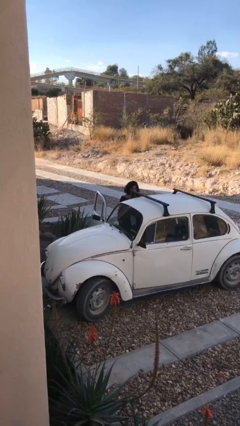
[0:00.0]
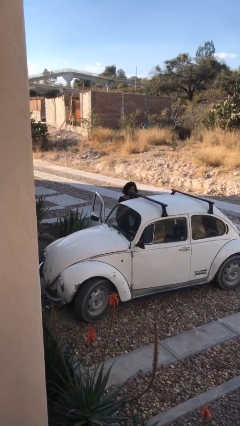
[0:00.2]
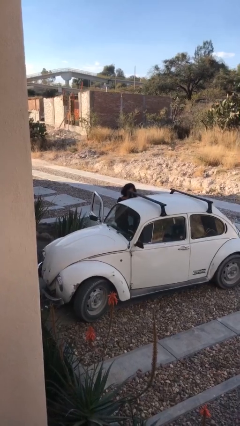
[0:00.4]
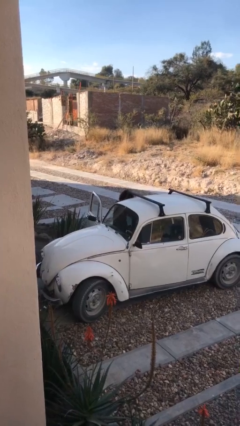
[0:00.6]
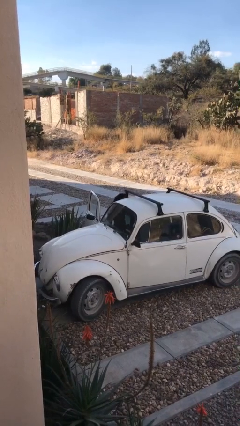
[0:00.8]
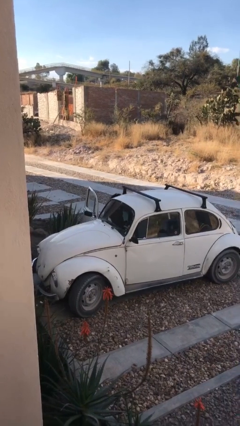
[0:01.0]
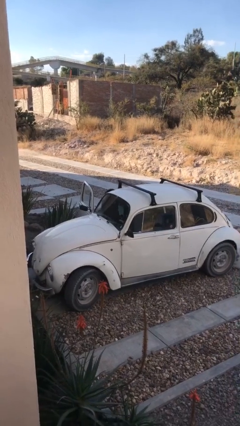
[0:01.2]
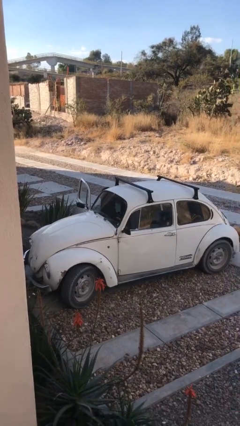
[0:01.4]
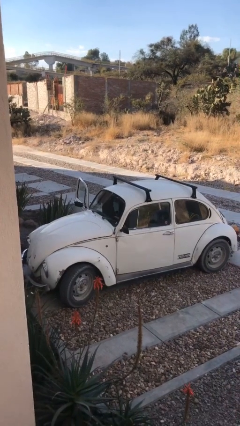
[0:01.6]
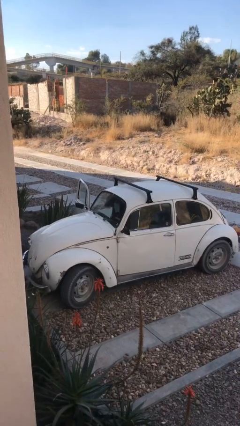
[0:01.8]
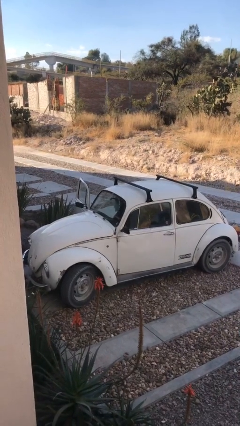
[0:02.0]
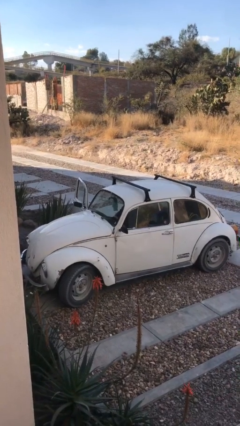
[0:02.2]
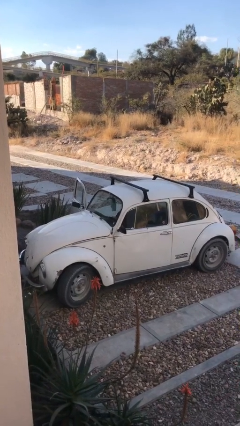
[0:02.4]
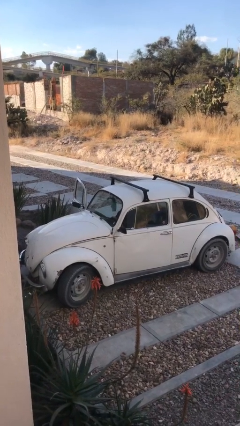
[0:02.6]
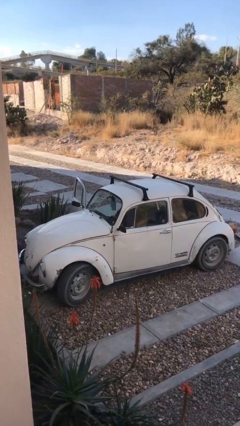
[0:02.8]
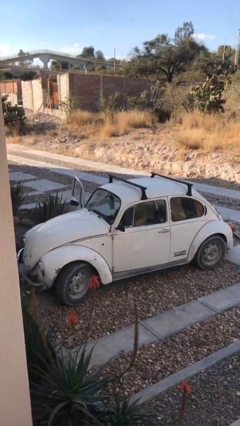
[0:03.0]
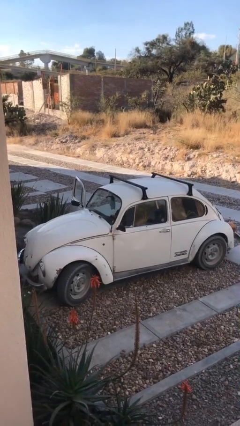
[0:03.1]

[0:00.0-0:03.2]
person enters car

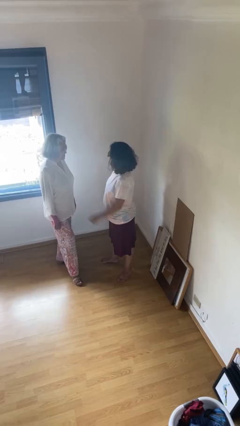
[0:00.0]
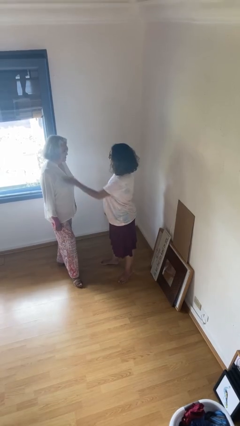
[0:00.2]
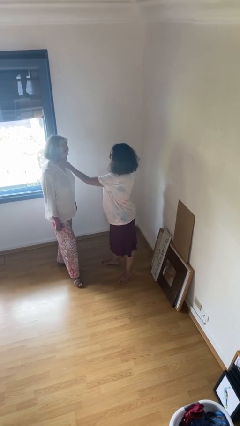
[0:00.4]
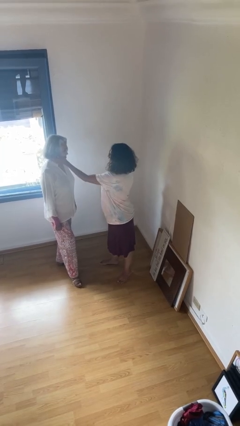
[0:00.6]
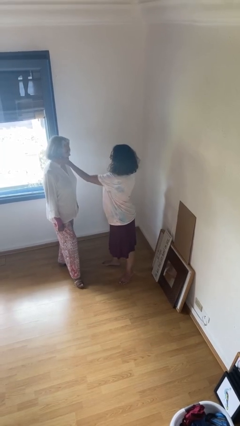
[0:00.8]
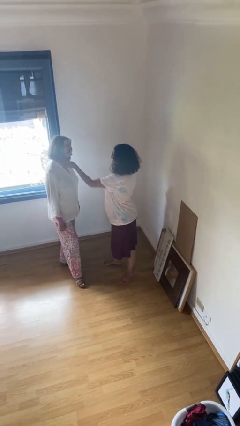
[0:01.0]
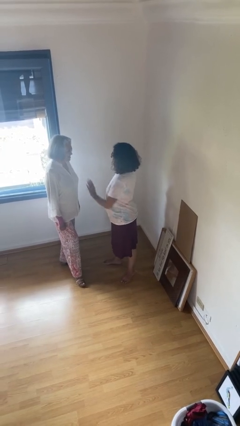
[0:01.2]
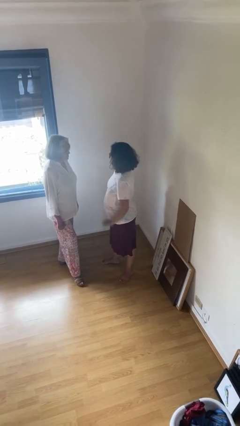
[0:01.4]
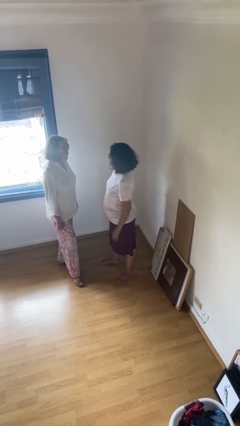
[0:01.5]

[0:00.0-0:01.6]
person touches face of person

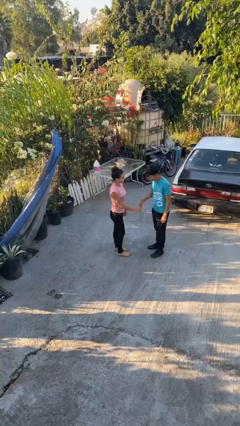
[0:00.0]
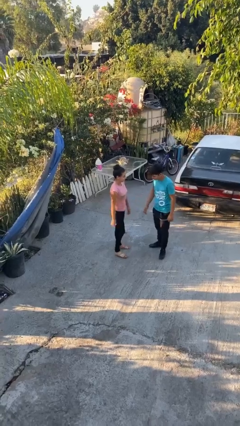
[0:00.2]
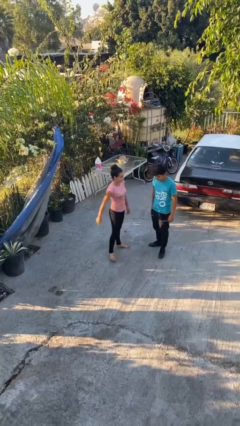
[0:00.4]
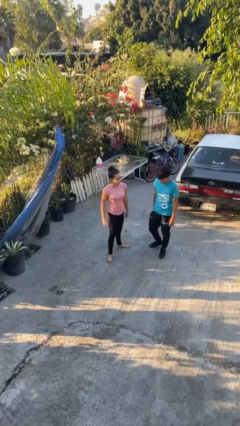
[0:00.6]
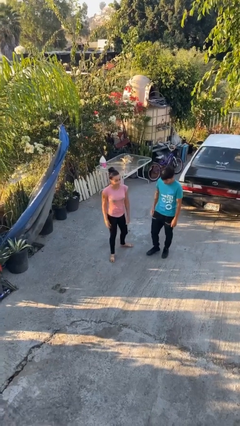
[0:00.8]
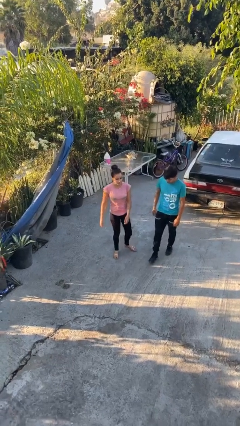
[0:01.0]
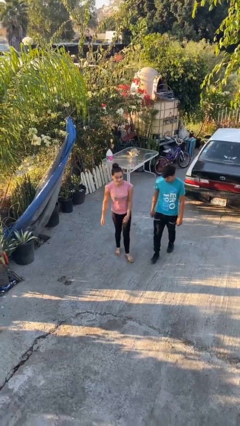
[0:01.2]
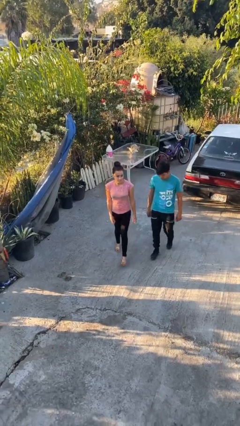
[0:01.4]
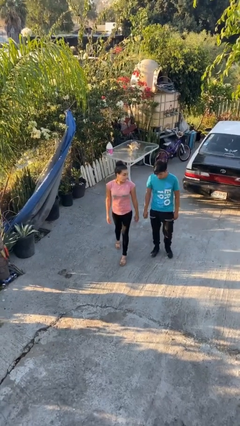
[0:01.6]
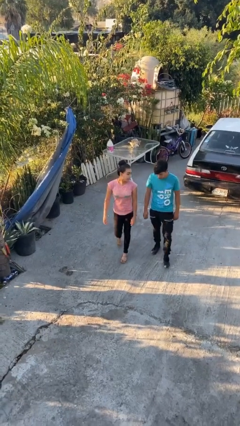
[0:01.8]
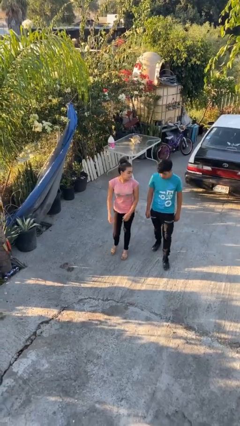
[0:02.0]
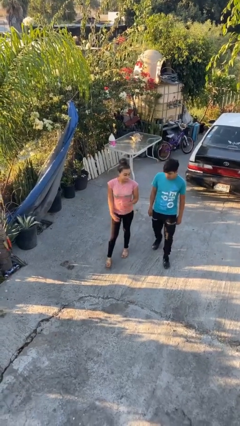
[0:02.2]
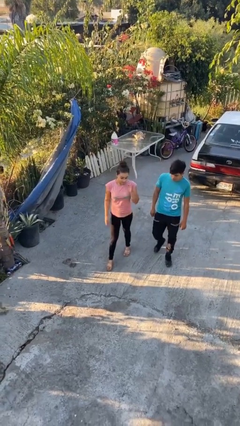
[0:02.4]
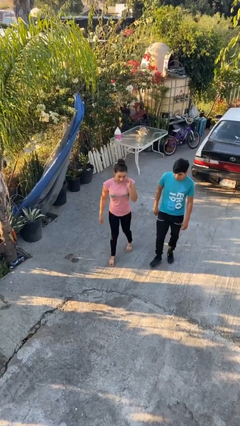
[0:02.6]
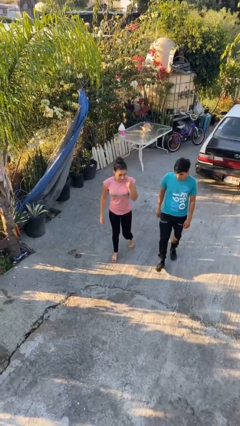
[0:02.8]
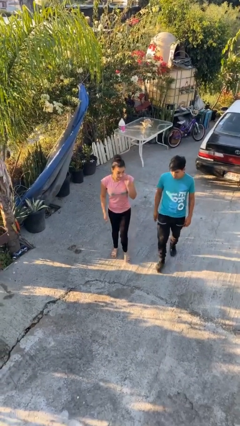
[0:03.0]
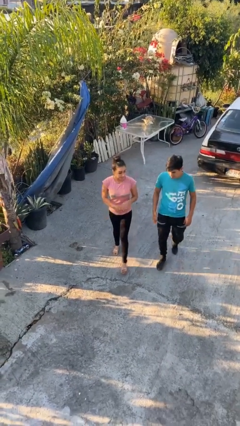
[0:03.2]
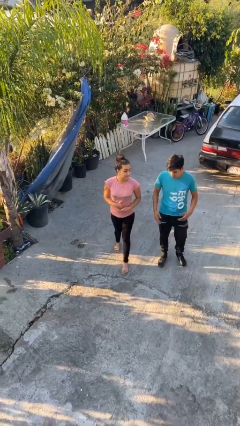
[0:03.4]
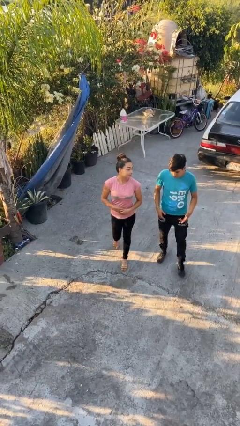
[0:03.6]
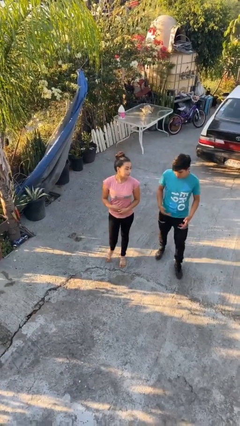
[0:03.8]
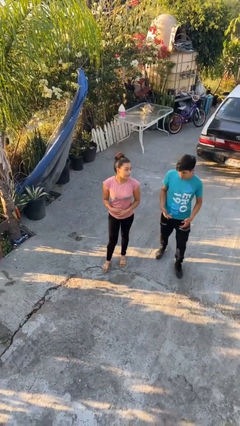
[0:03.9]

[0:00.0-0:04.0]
person talks to person

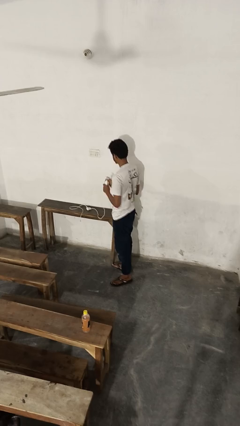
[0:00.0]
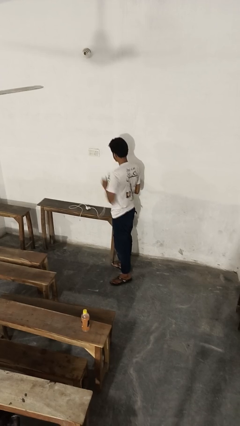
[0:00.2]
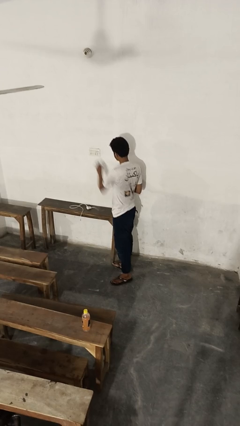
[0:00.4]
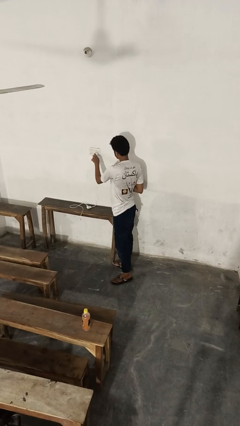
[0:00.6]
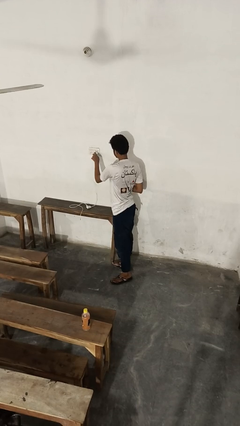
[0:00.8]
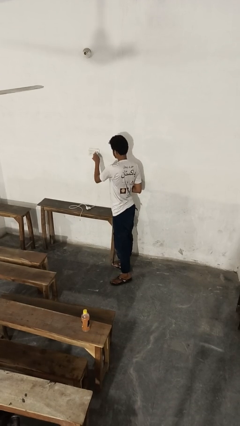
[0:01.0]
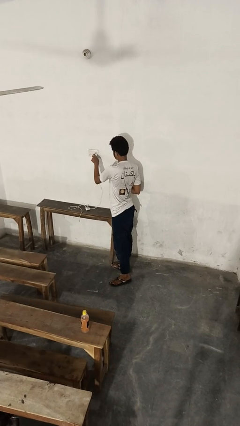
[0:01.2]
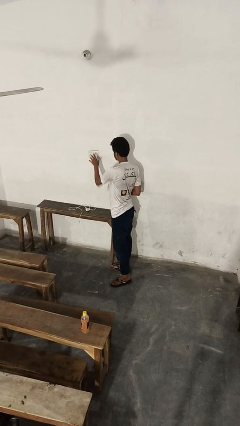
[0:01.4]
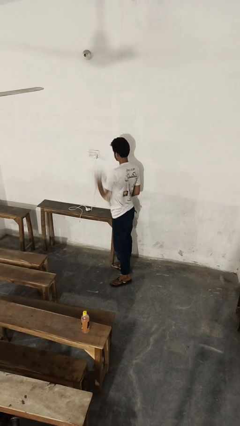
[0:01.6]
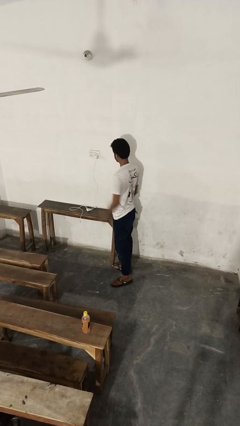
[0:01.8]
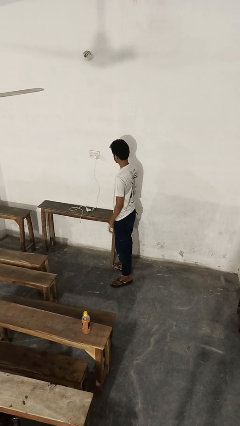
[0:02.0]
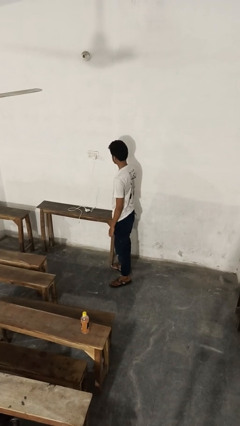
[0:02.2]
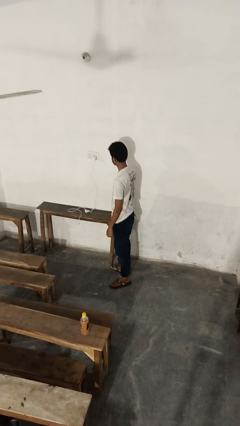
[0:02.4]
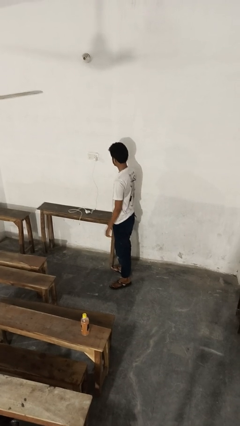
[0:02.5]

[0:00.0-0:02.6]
person plugs into electrical socket

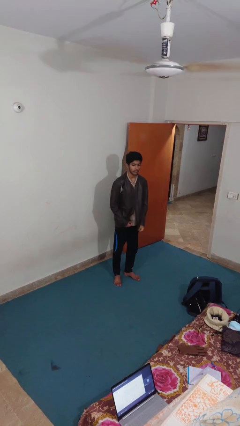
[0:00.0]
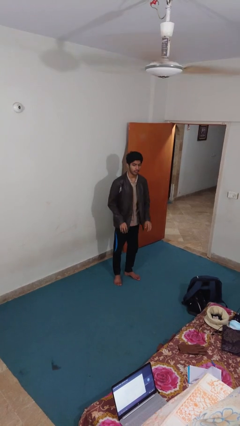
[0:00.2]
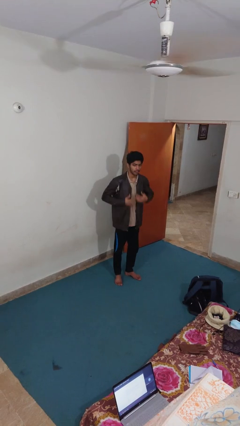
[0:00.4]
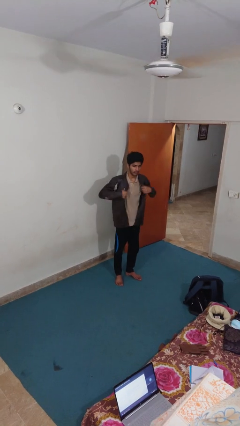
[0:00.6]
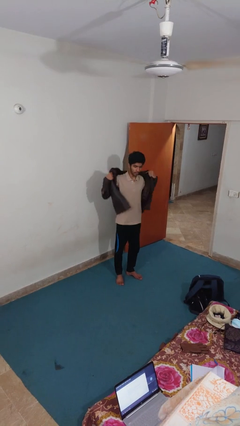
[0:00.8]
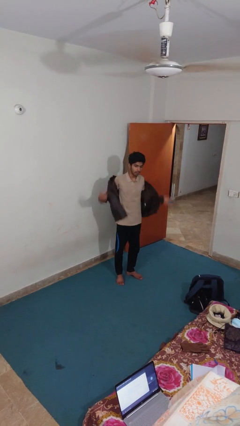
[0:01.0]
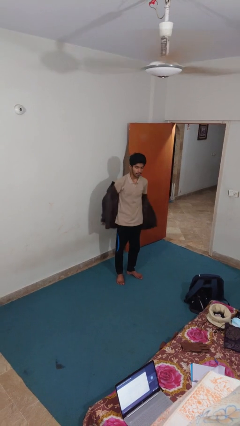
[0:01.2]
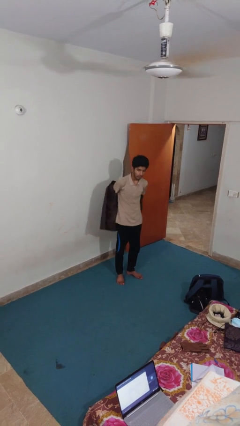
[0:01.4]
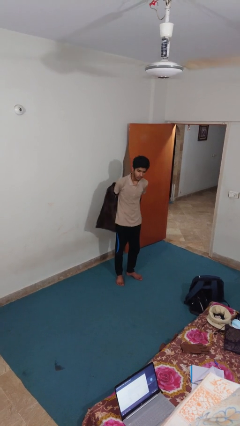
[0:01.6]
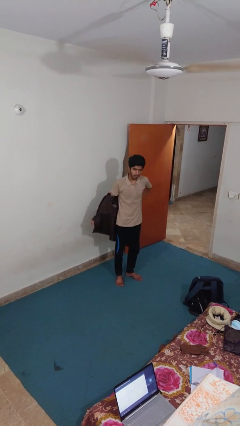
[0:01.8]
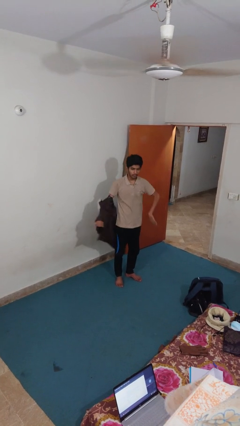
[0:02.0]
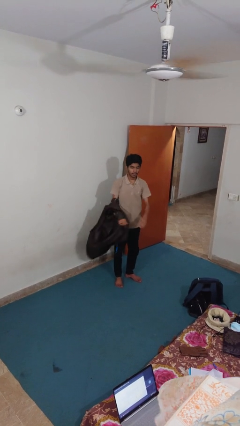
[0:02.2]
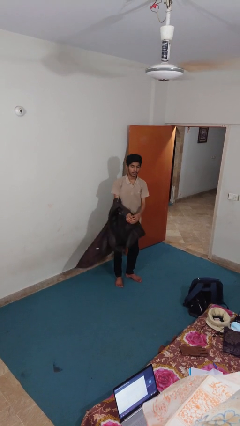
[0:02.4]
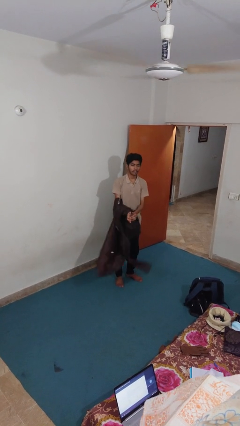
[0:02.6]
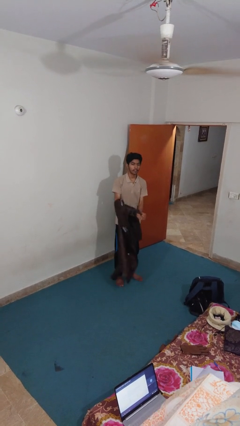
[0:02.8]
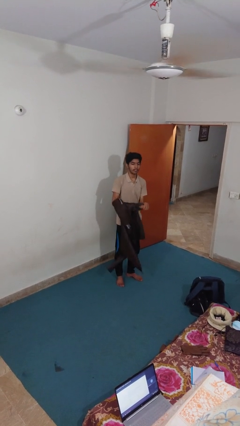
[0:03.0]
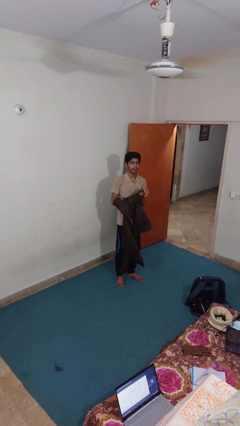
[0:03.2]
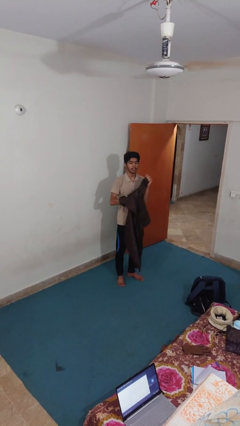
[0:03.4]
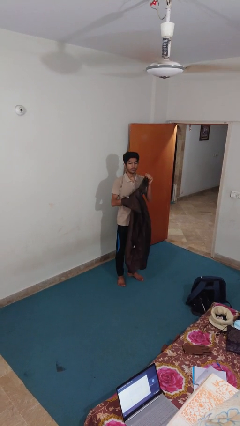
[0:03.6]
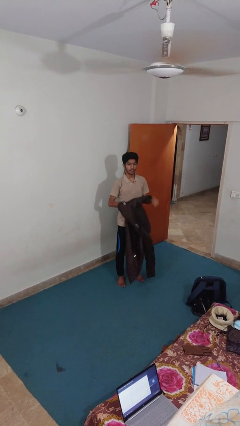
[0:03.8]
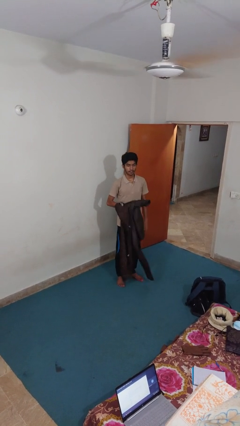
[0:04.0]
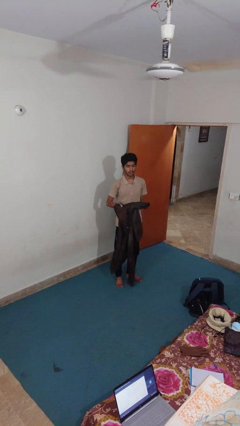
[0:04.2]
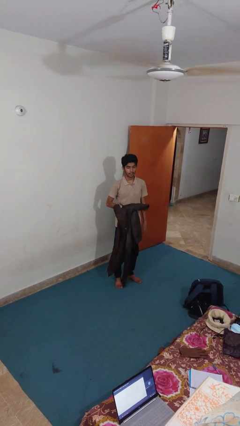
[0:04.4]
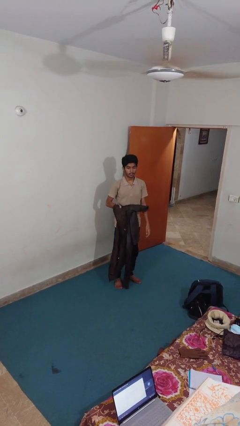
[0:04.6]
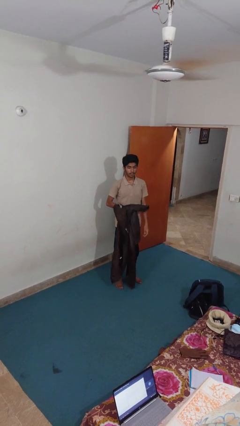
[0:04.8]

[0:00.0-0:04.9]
person takes off jacket

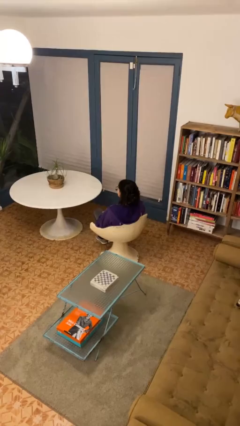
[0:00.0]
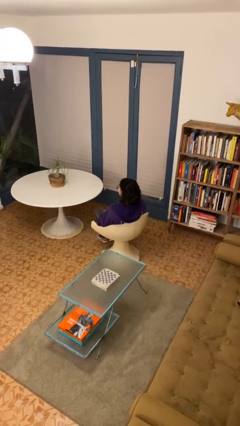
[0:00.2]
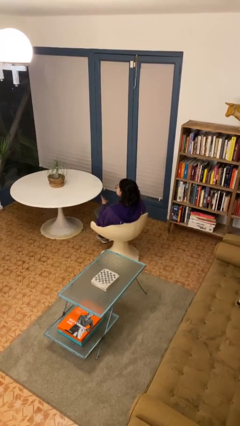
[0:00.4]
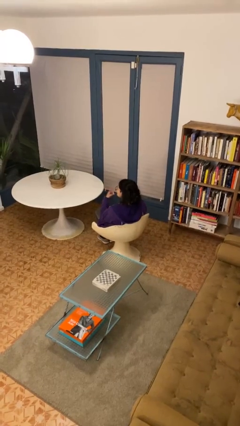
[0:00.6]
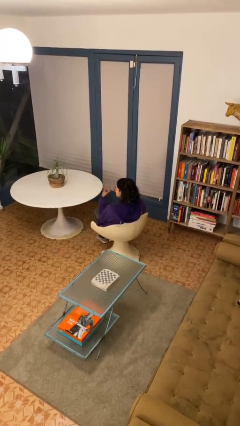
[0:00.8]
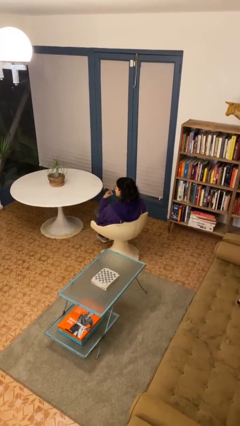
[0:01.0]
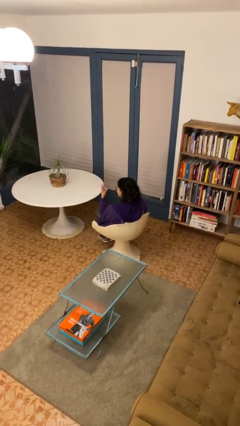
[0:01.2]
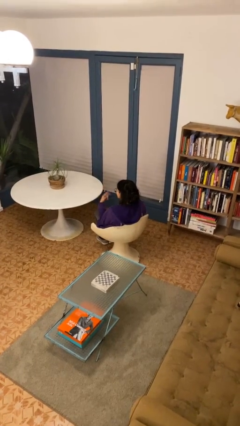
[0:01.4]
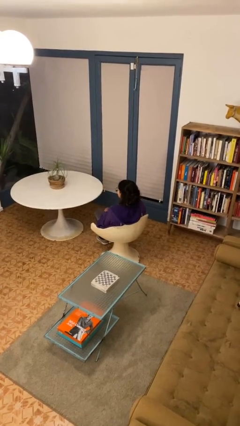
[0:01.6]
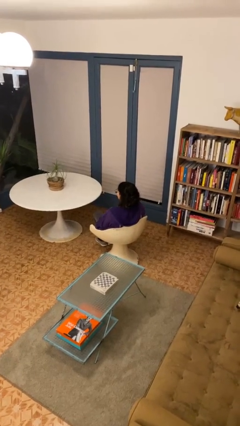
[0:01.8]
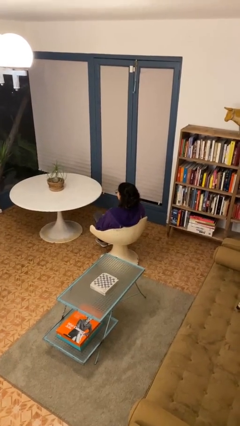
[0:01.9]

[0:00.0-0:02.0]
person gestures watch closely
